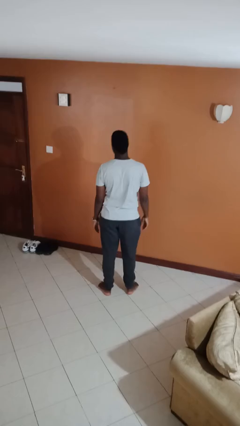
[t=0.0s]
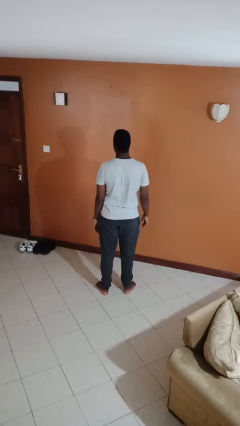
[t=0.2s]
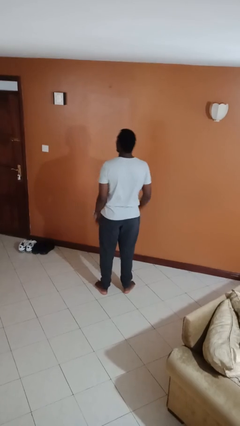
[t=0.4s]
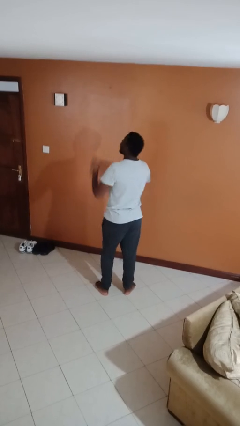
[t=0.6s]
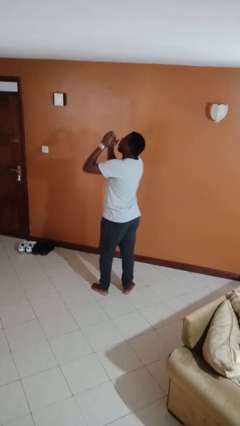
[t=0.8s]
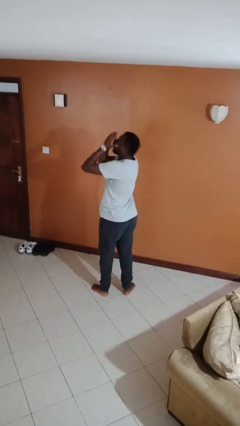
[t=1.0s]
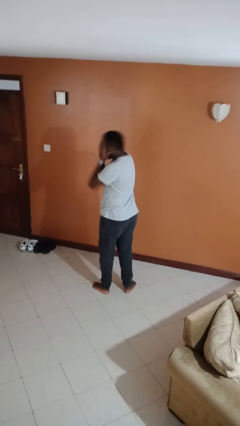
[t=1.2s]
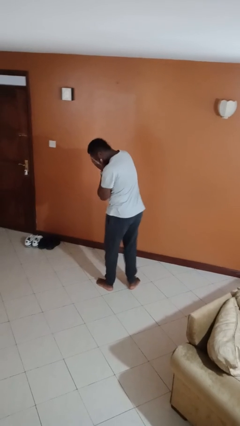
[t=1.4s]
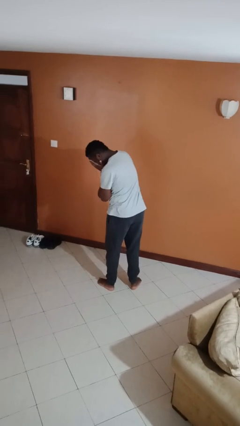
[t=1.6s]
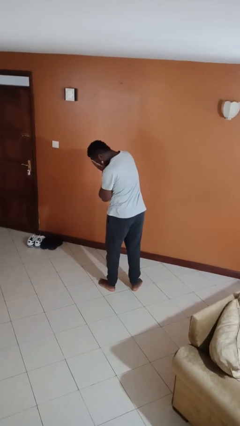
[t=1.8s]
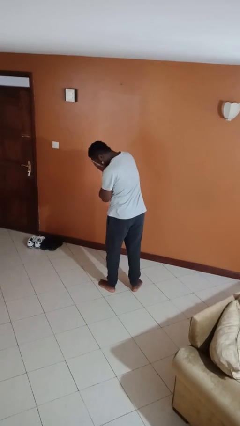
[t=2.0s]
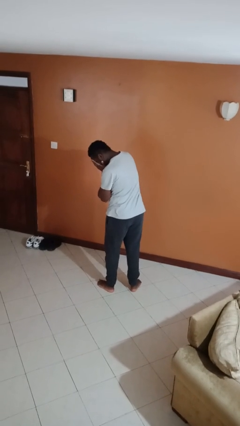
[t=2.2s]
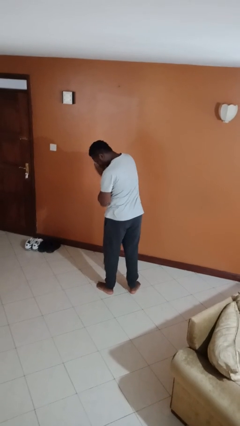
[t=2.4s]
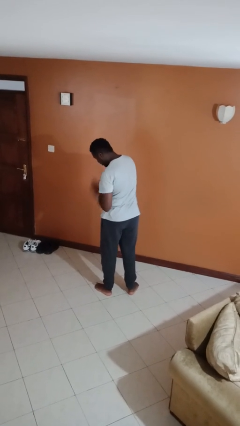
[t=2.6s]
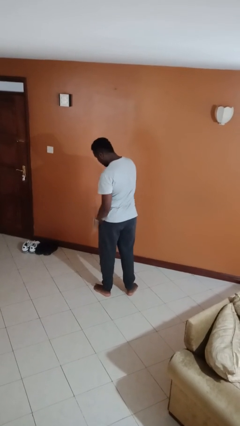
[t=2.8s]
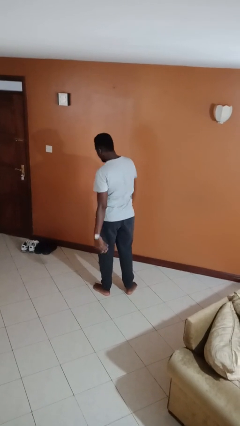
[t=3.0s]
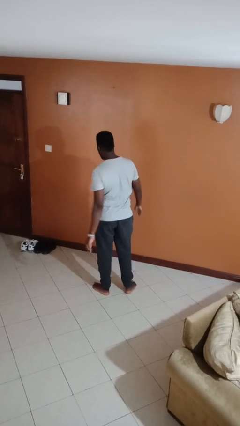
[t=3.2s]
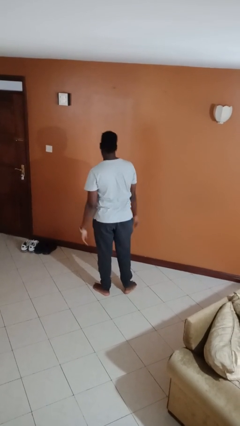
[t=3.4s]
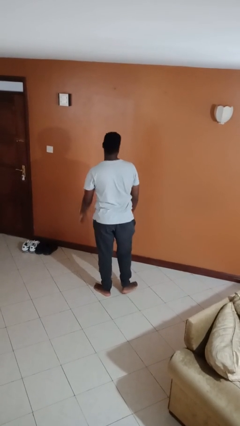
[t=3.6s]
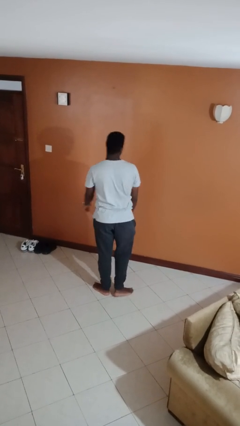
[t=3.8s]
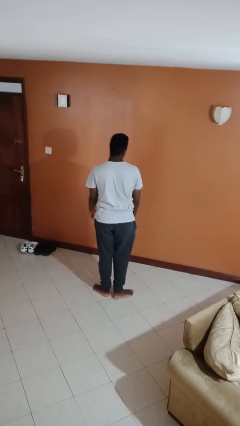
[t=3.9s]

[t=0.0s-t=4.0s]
person sneezes into hand

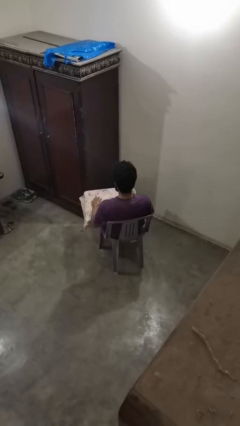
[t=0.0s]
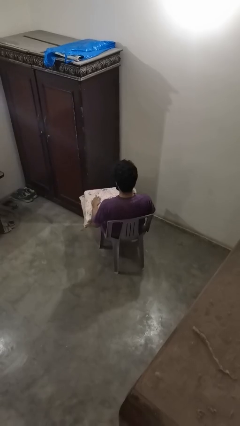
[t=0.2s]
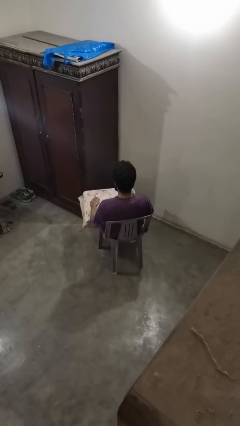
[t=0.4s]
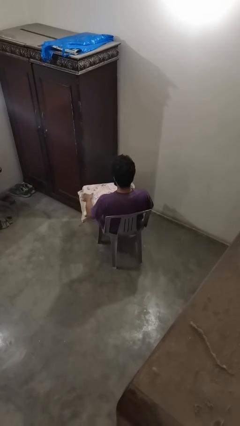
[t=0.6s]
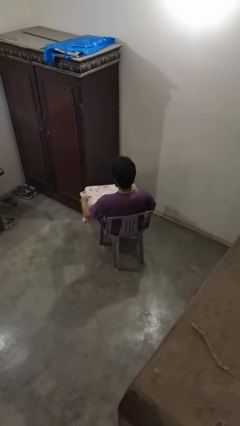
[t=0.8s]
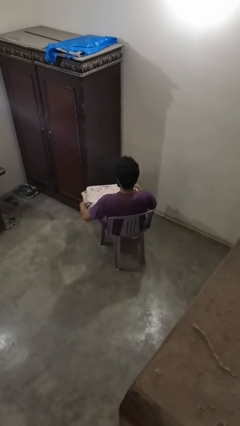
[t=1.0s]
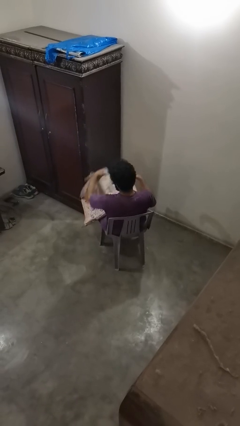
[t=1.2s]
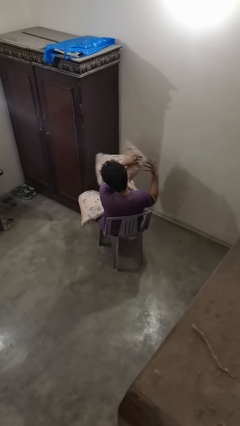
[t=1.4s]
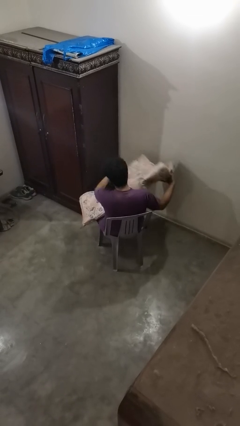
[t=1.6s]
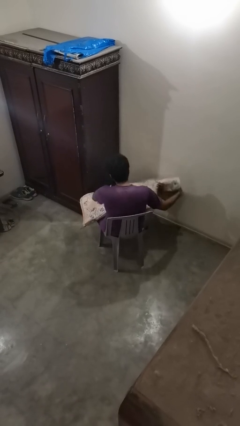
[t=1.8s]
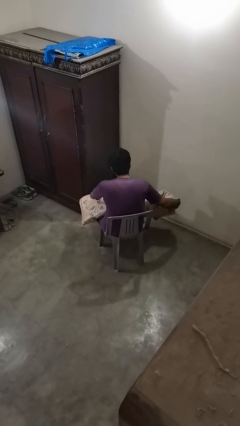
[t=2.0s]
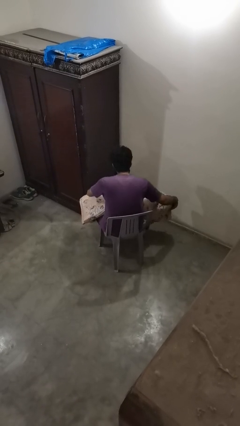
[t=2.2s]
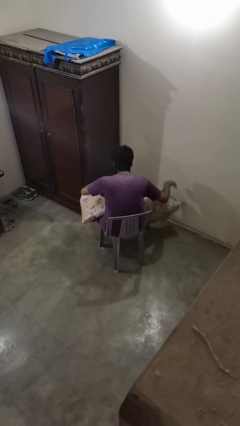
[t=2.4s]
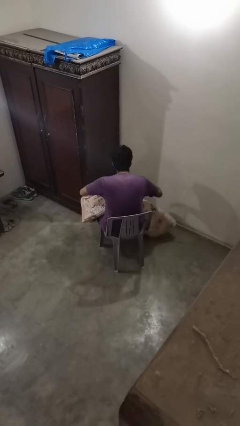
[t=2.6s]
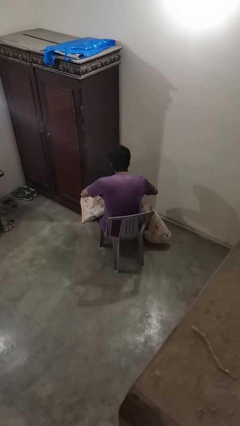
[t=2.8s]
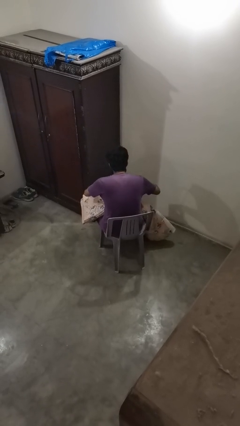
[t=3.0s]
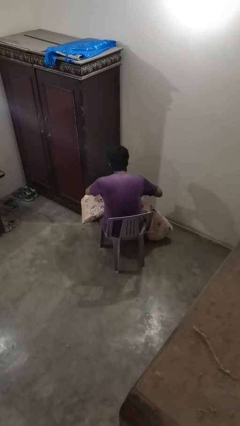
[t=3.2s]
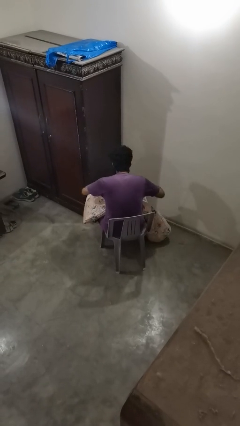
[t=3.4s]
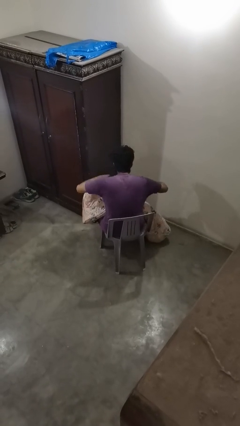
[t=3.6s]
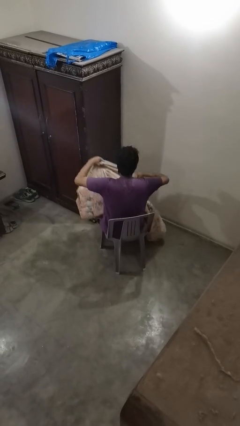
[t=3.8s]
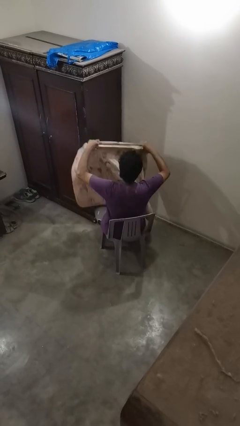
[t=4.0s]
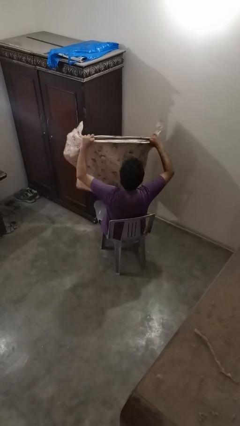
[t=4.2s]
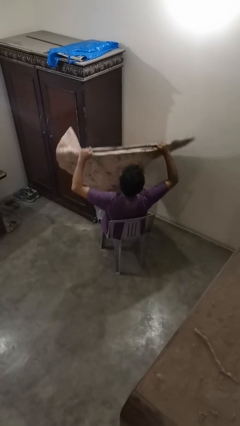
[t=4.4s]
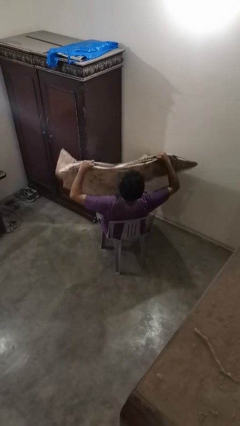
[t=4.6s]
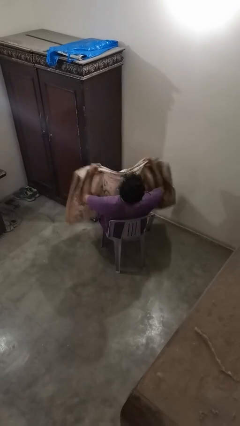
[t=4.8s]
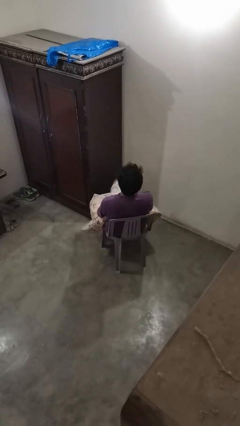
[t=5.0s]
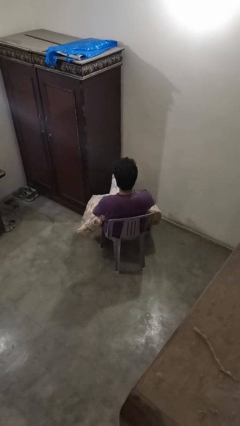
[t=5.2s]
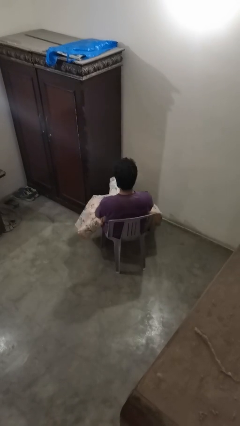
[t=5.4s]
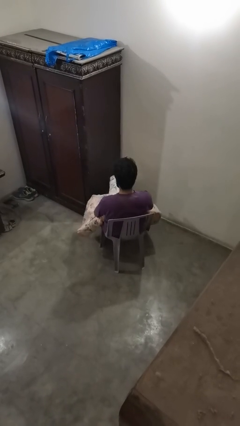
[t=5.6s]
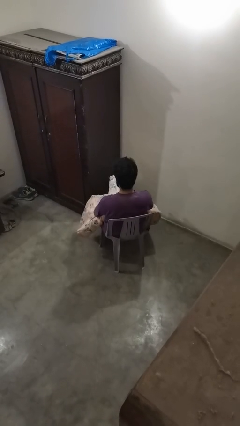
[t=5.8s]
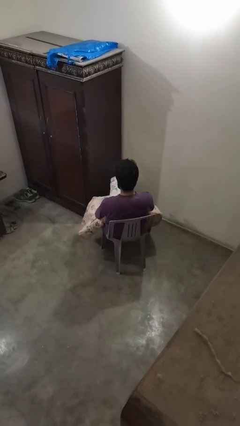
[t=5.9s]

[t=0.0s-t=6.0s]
person unfolds blanket

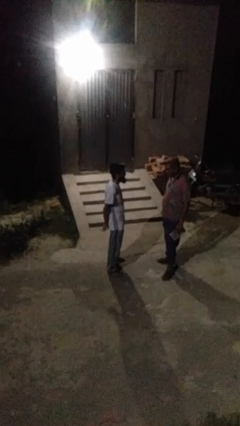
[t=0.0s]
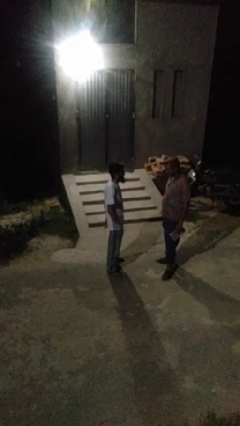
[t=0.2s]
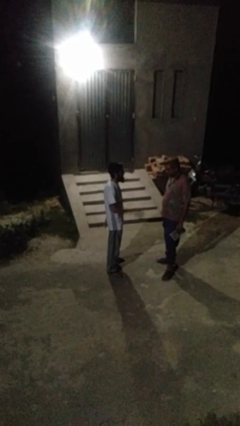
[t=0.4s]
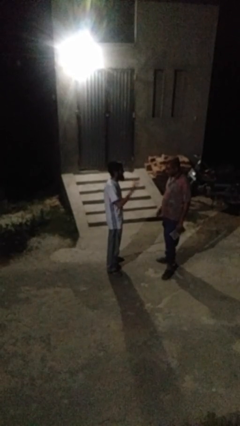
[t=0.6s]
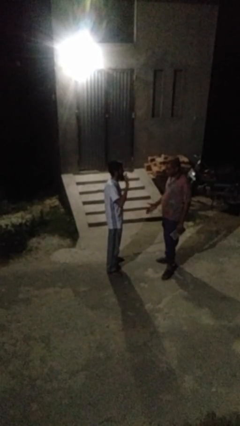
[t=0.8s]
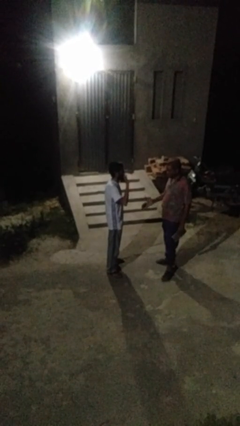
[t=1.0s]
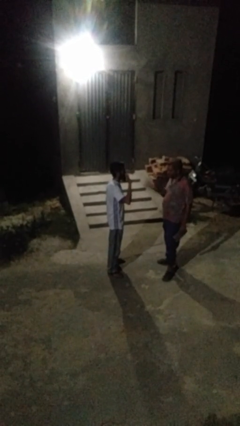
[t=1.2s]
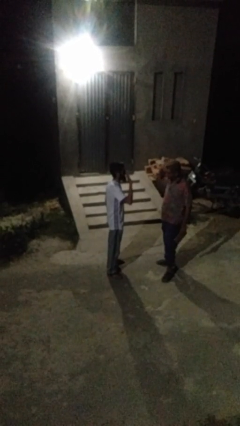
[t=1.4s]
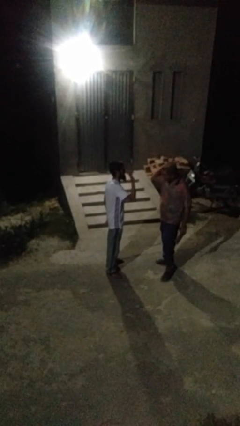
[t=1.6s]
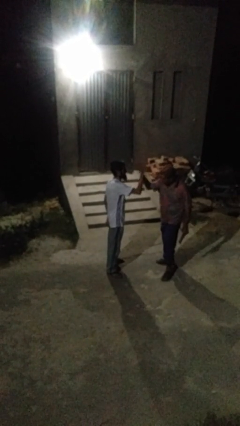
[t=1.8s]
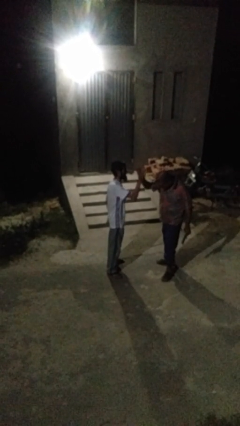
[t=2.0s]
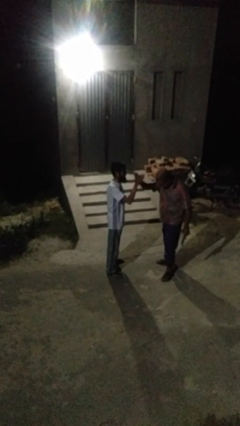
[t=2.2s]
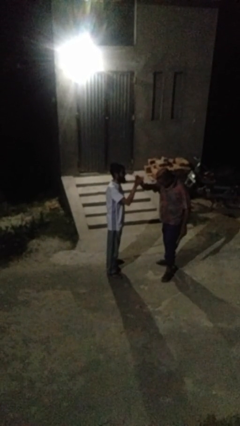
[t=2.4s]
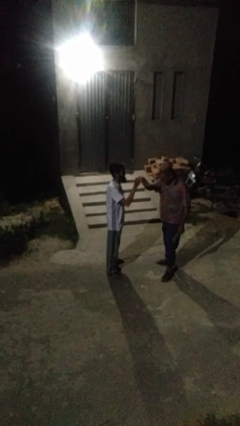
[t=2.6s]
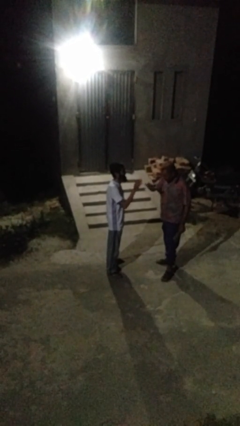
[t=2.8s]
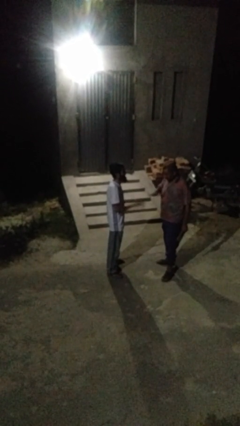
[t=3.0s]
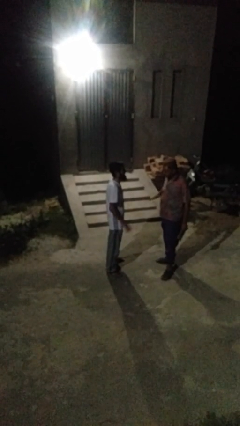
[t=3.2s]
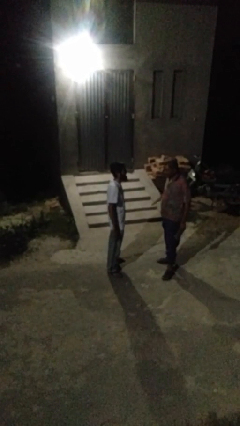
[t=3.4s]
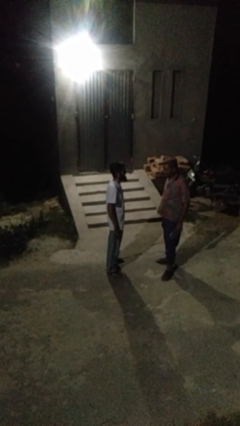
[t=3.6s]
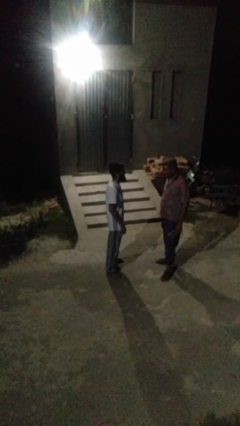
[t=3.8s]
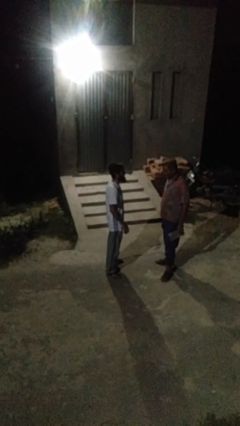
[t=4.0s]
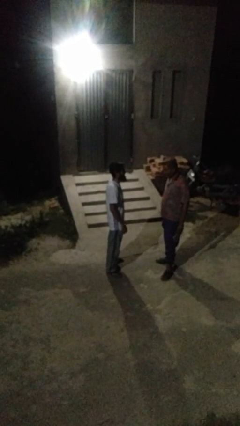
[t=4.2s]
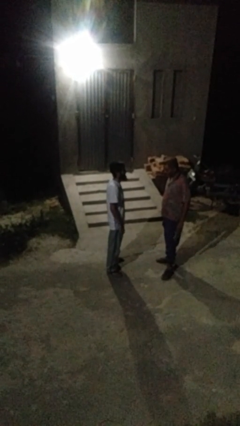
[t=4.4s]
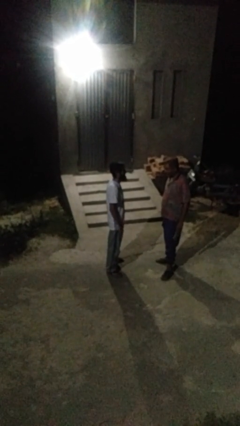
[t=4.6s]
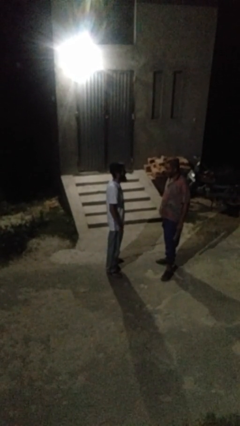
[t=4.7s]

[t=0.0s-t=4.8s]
person highfives hand

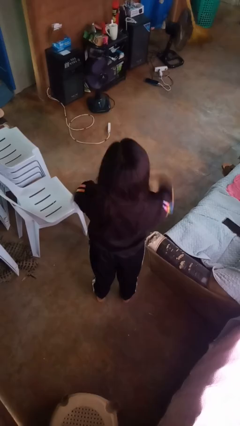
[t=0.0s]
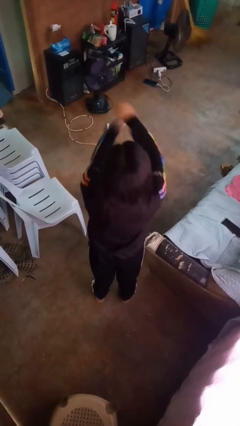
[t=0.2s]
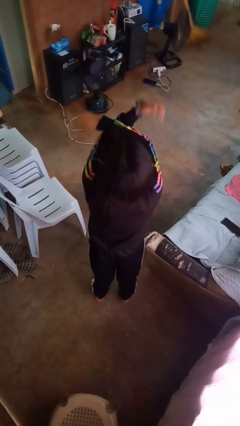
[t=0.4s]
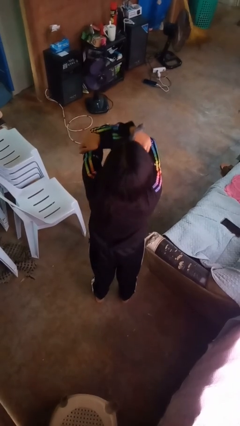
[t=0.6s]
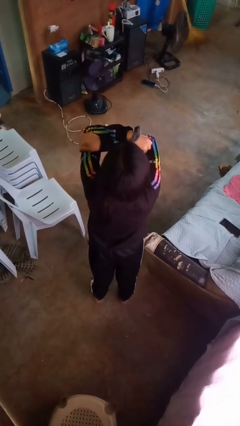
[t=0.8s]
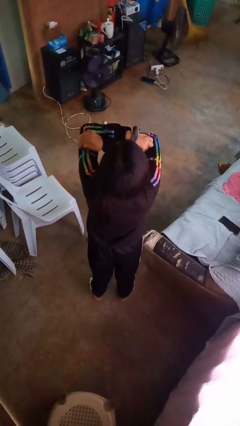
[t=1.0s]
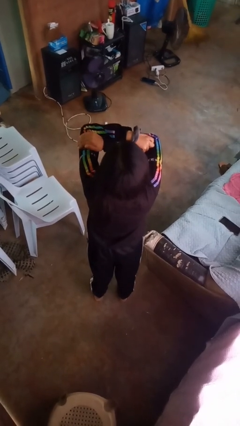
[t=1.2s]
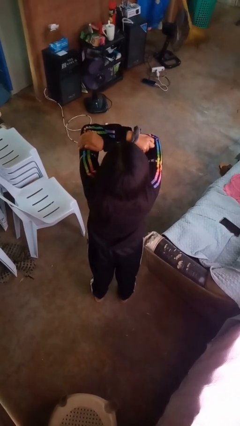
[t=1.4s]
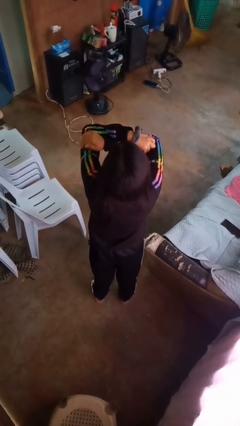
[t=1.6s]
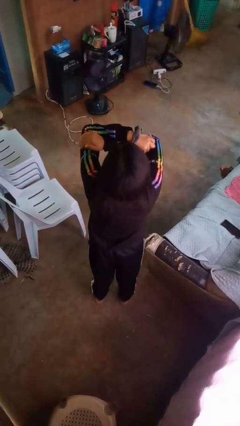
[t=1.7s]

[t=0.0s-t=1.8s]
person gestures arms x

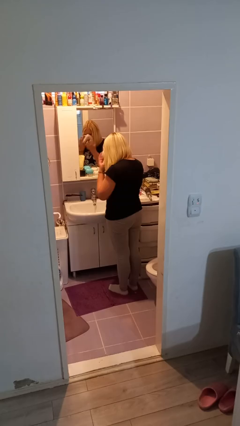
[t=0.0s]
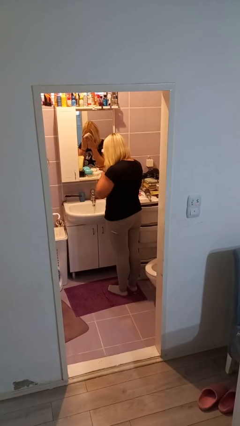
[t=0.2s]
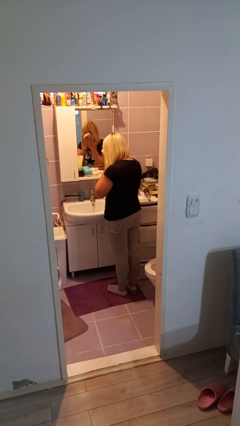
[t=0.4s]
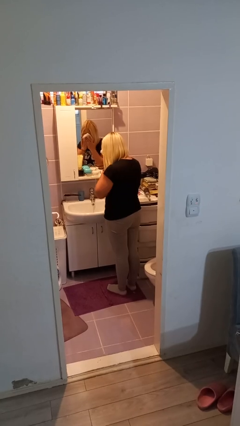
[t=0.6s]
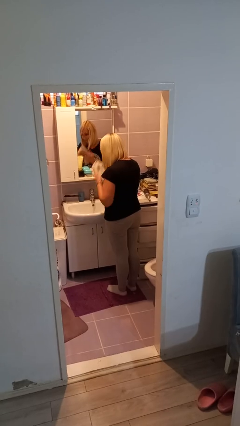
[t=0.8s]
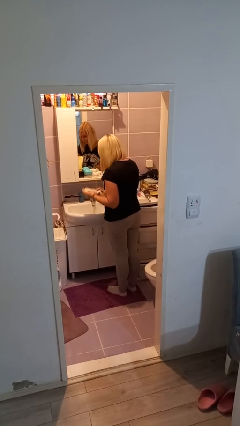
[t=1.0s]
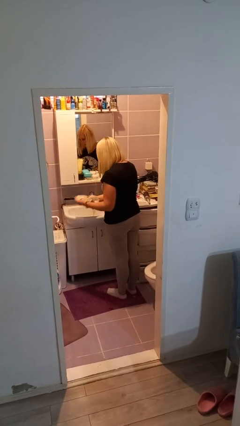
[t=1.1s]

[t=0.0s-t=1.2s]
person dries face with towel
